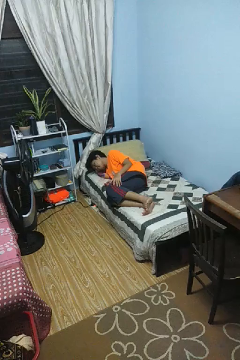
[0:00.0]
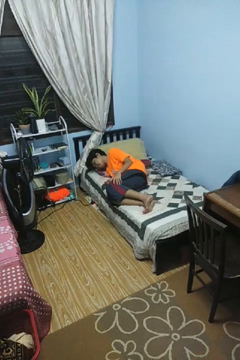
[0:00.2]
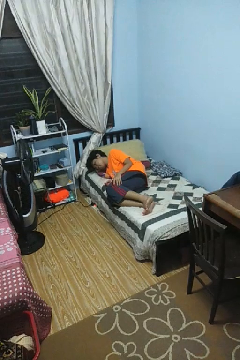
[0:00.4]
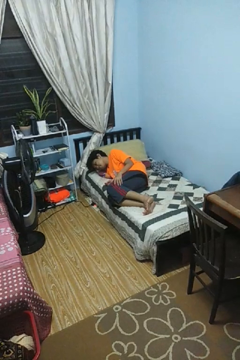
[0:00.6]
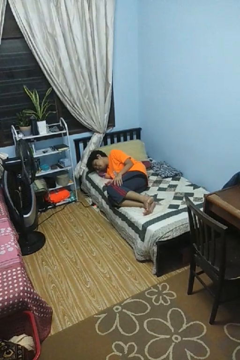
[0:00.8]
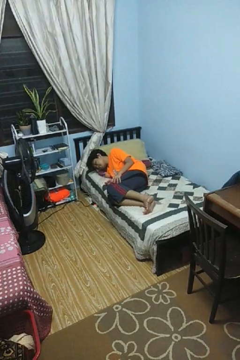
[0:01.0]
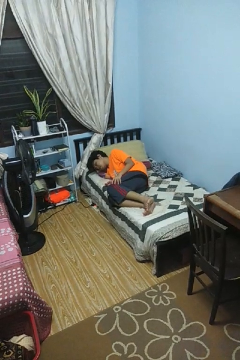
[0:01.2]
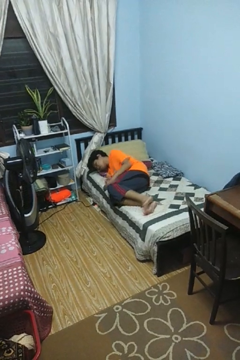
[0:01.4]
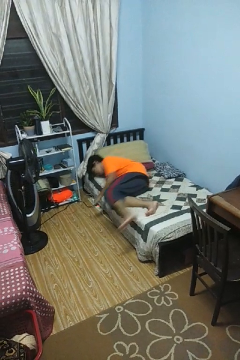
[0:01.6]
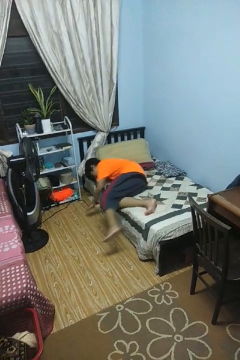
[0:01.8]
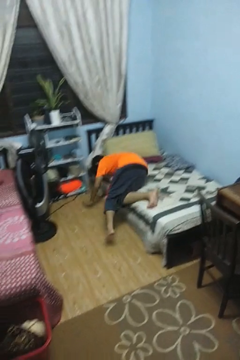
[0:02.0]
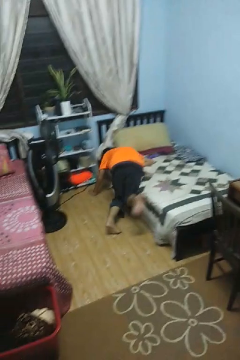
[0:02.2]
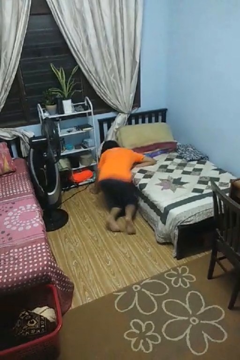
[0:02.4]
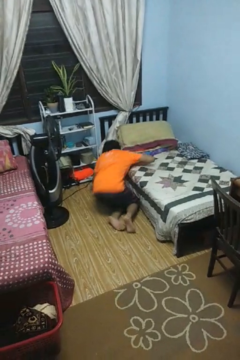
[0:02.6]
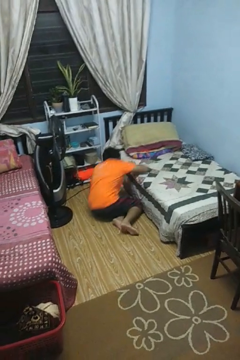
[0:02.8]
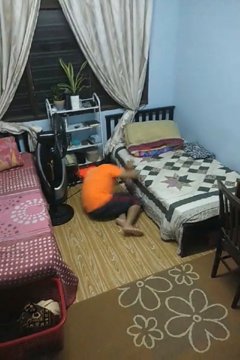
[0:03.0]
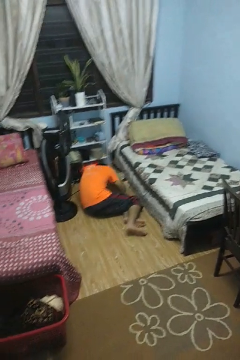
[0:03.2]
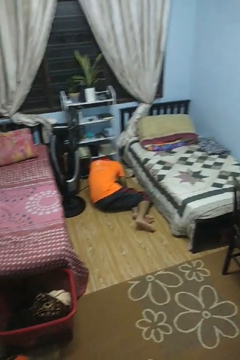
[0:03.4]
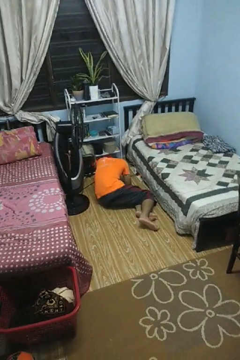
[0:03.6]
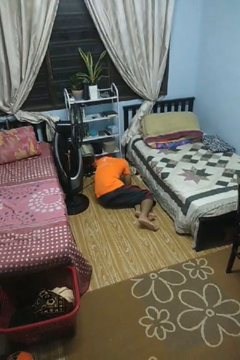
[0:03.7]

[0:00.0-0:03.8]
person falls from bed

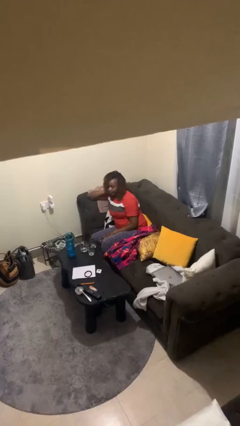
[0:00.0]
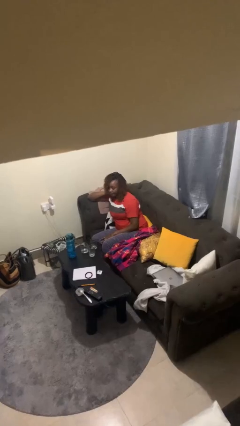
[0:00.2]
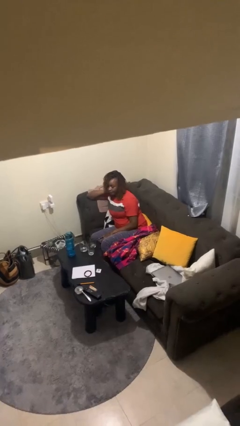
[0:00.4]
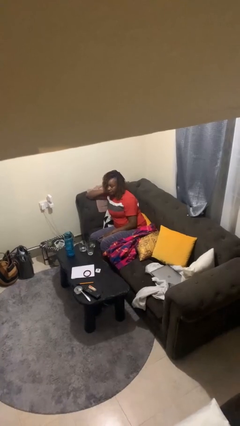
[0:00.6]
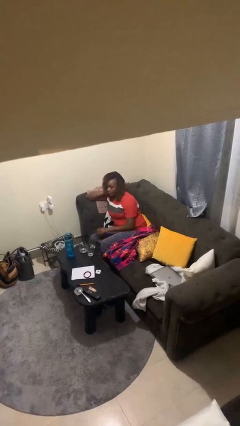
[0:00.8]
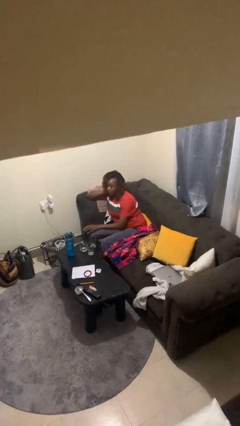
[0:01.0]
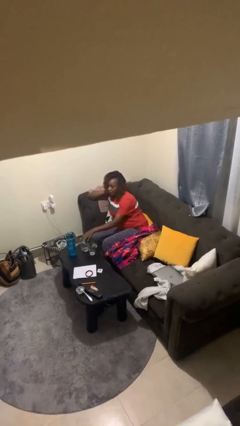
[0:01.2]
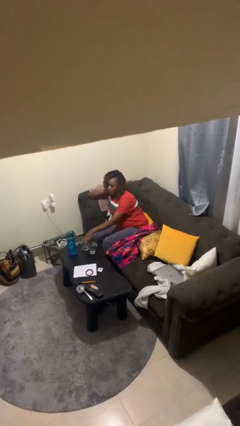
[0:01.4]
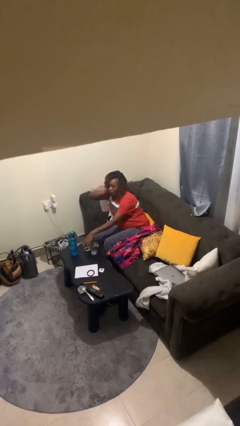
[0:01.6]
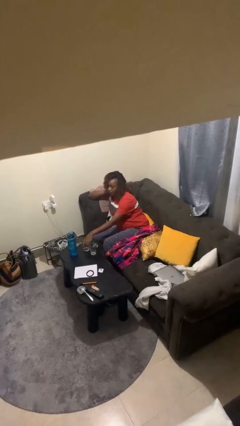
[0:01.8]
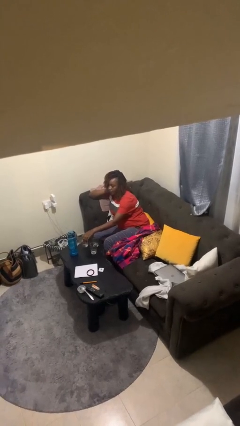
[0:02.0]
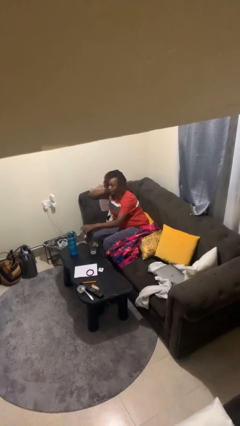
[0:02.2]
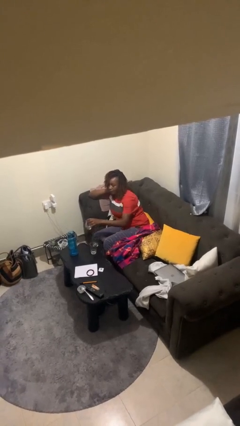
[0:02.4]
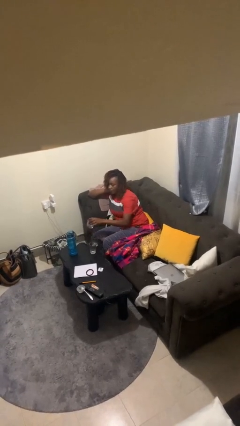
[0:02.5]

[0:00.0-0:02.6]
person picks up object from table

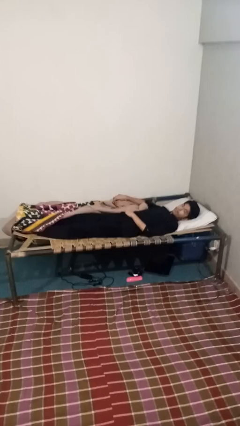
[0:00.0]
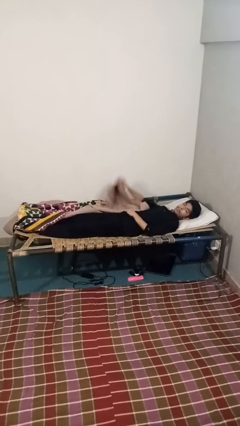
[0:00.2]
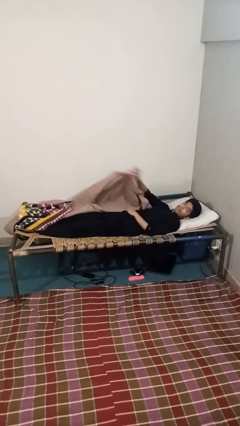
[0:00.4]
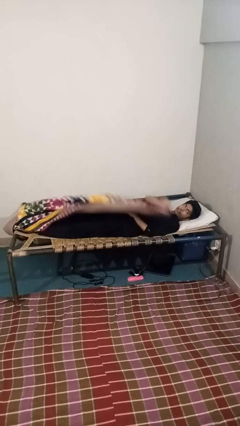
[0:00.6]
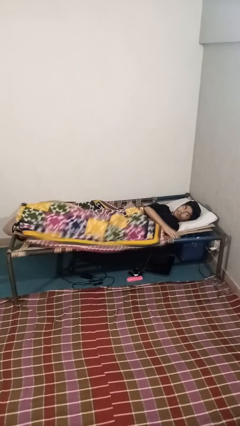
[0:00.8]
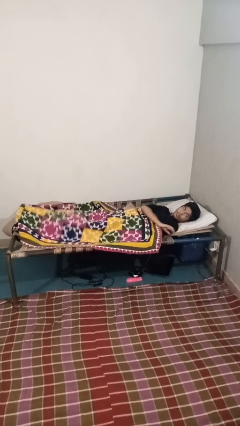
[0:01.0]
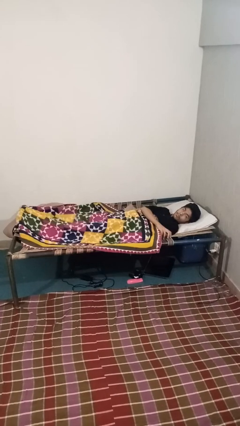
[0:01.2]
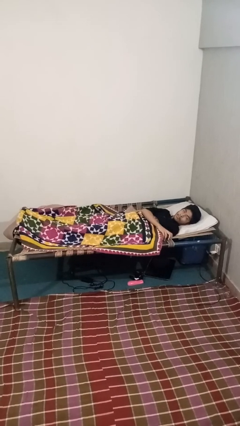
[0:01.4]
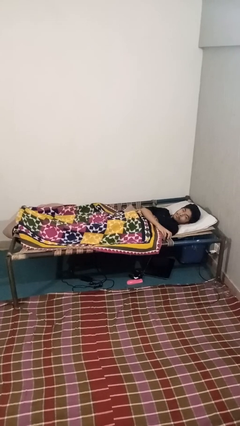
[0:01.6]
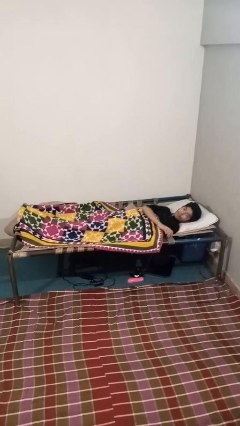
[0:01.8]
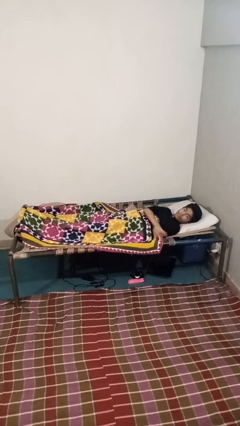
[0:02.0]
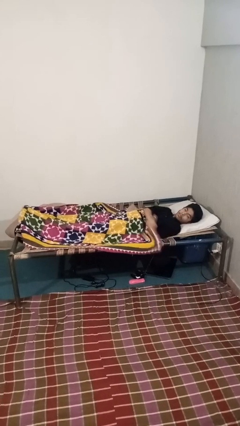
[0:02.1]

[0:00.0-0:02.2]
person covers with bedsheets

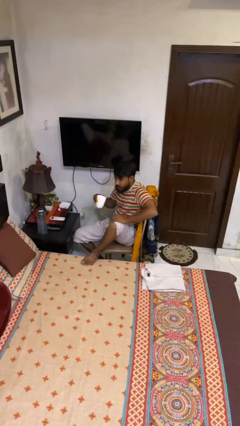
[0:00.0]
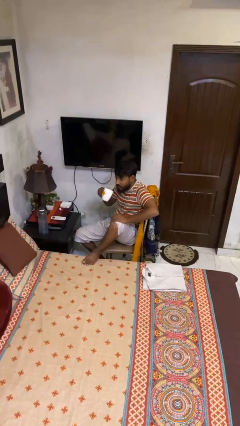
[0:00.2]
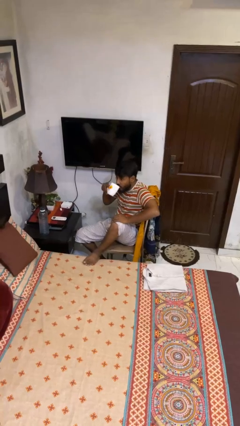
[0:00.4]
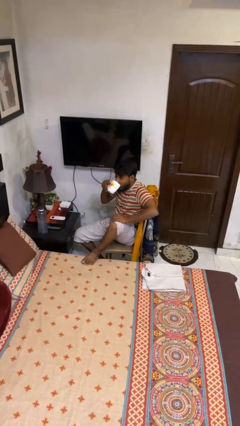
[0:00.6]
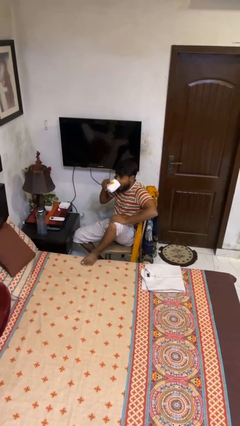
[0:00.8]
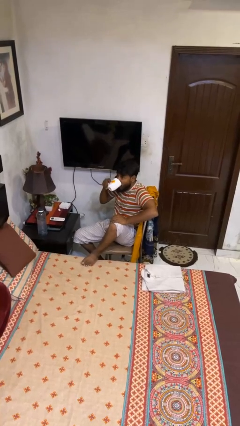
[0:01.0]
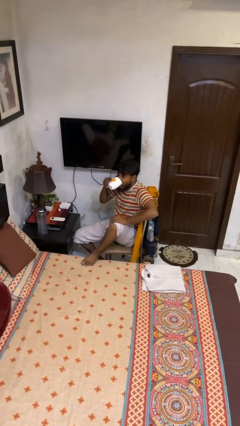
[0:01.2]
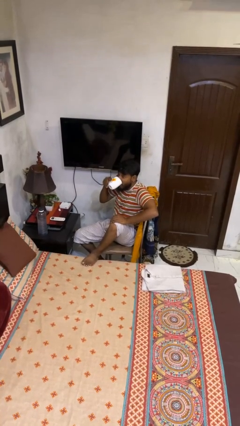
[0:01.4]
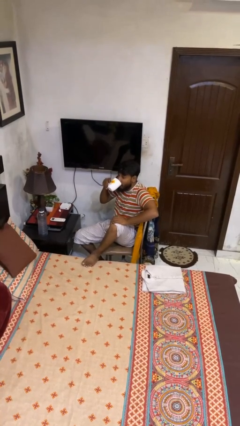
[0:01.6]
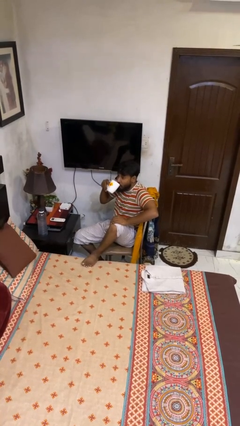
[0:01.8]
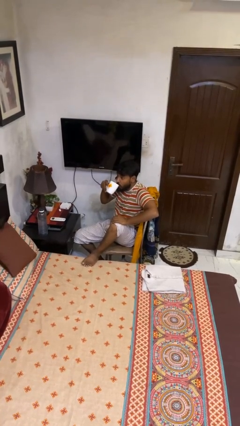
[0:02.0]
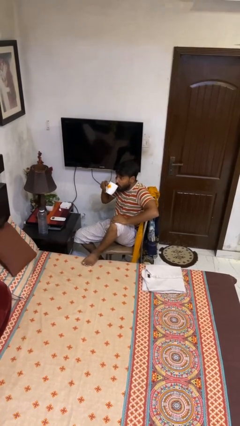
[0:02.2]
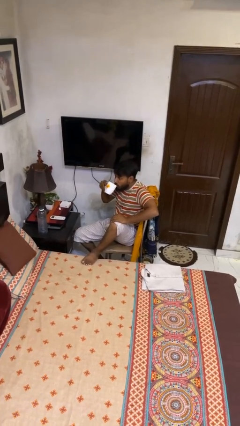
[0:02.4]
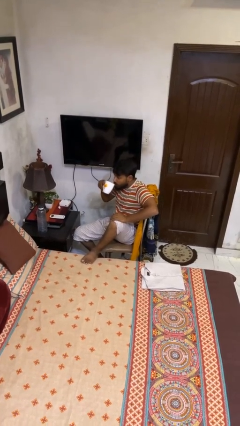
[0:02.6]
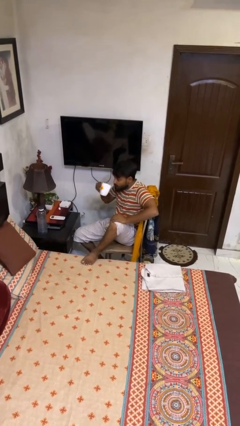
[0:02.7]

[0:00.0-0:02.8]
person drinks from mug

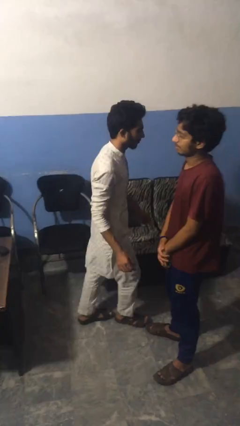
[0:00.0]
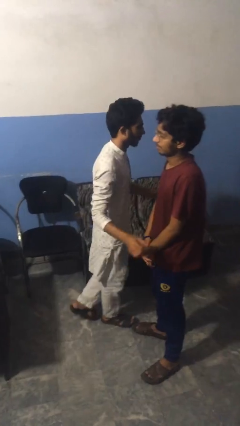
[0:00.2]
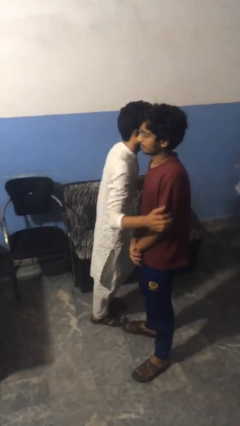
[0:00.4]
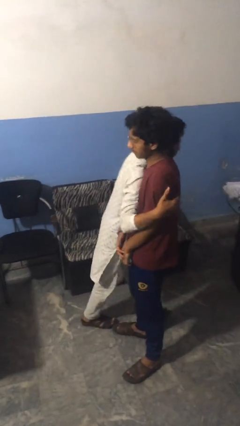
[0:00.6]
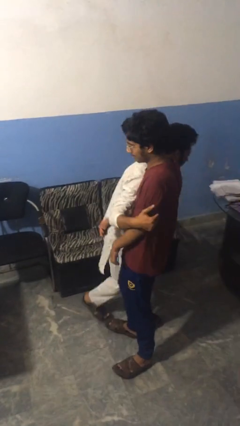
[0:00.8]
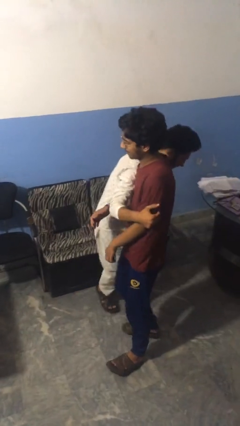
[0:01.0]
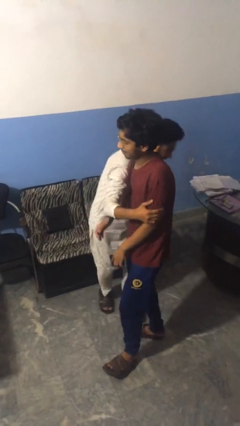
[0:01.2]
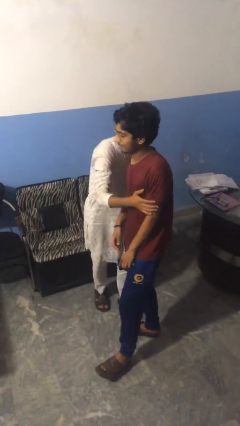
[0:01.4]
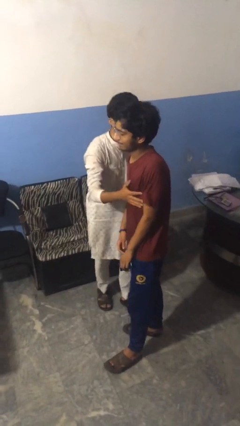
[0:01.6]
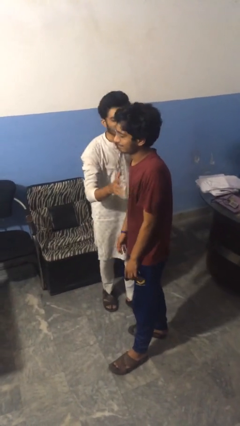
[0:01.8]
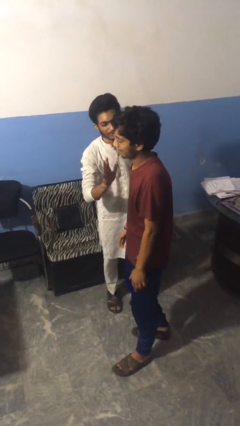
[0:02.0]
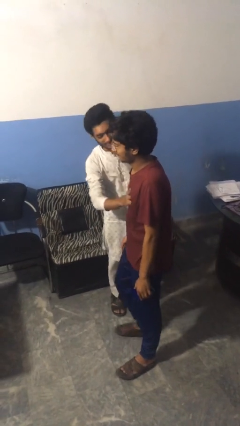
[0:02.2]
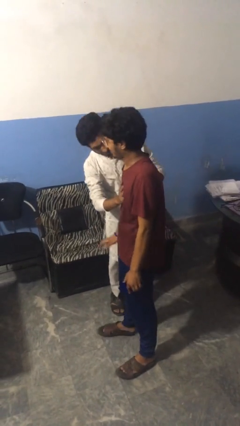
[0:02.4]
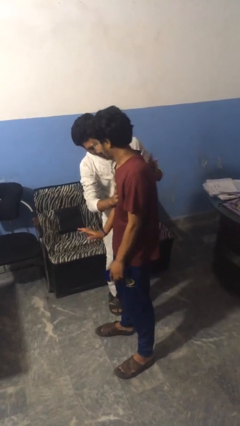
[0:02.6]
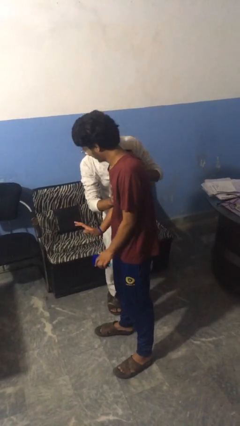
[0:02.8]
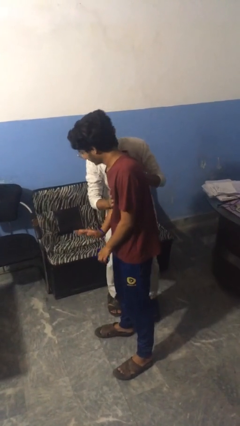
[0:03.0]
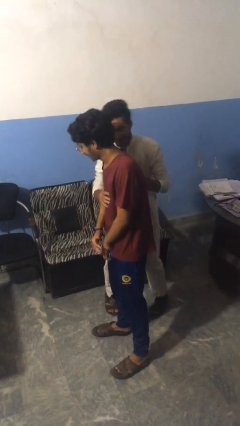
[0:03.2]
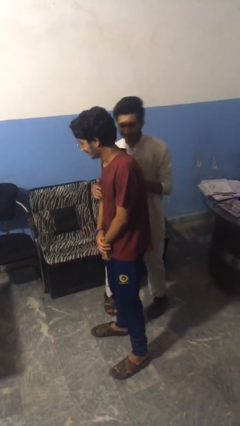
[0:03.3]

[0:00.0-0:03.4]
person bumps into person

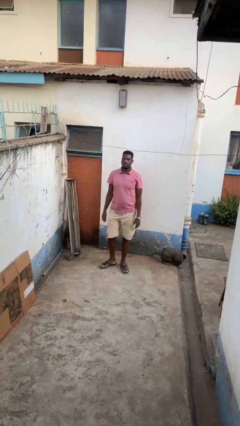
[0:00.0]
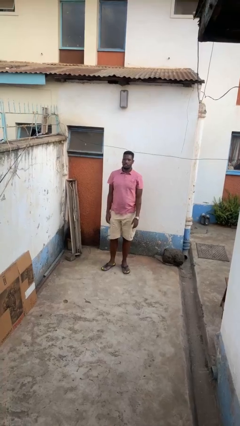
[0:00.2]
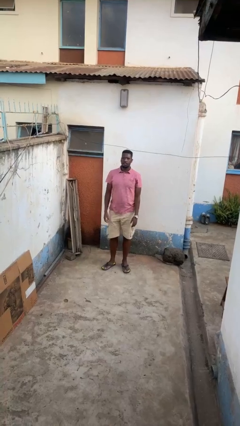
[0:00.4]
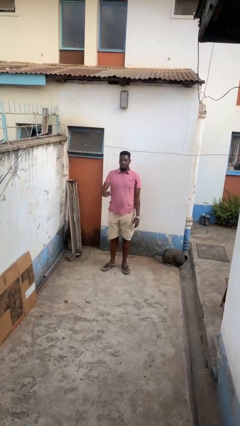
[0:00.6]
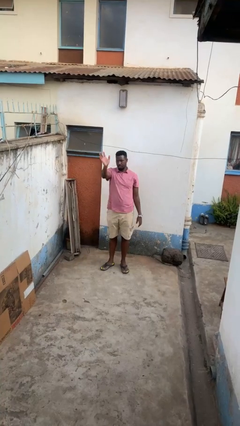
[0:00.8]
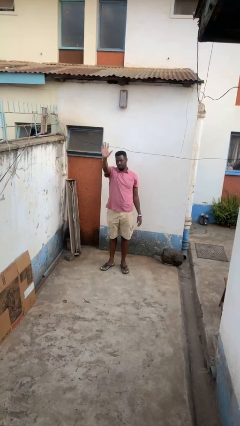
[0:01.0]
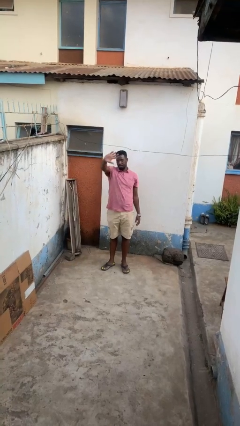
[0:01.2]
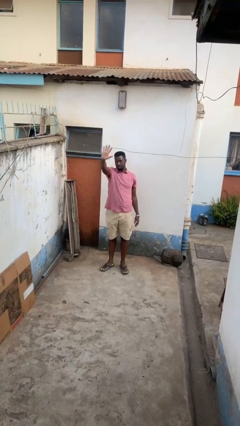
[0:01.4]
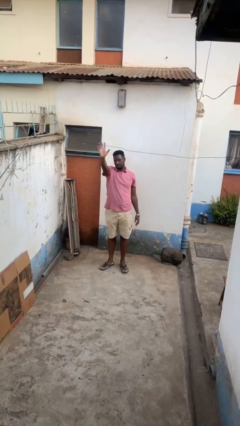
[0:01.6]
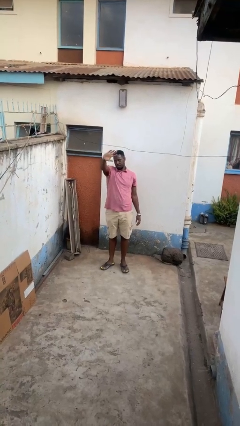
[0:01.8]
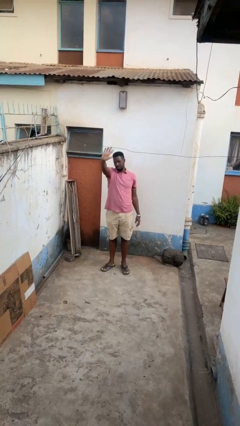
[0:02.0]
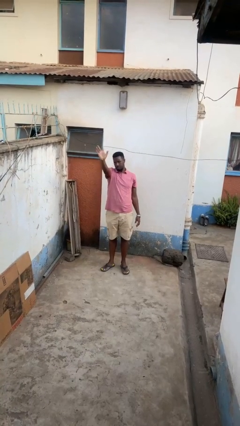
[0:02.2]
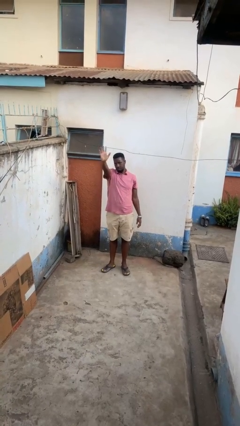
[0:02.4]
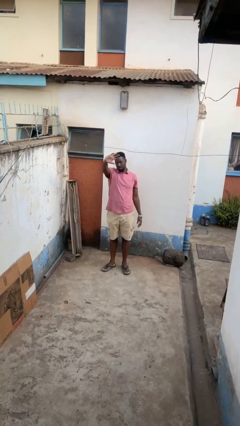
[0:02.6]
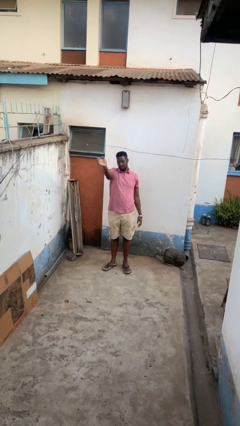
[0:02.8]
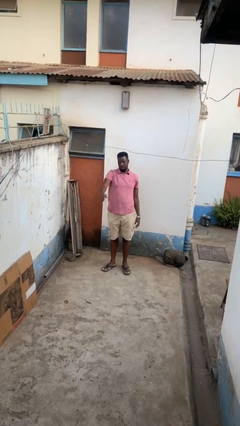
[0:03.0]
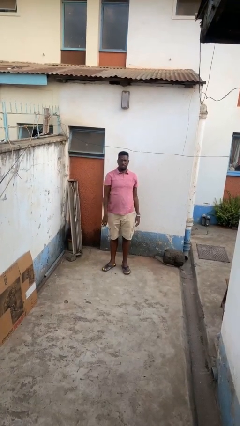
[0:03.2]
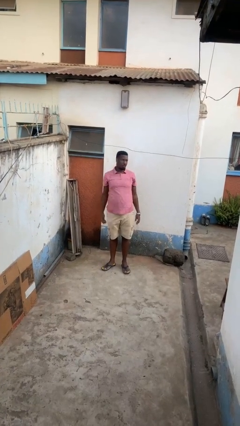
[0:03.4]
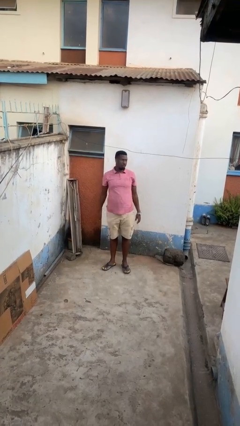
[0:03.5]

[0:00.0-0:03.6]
person waves at person
